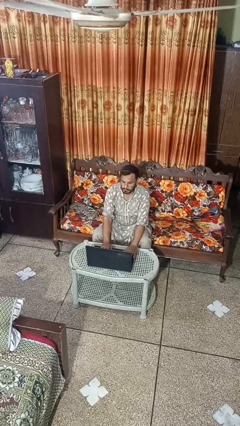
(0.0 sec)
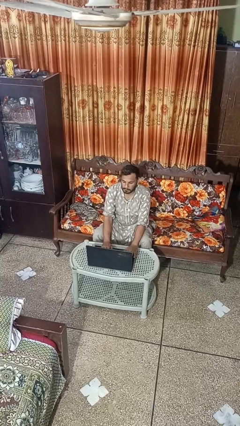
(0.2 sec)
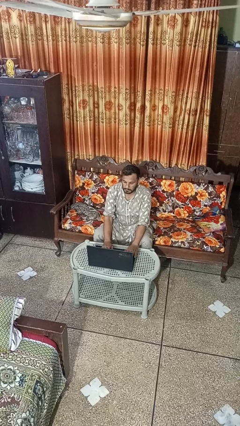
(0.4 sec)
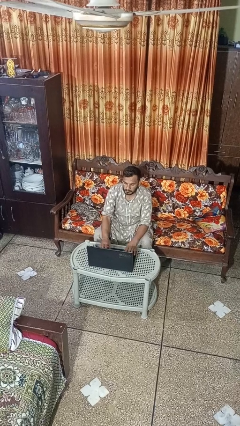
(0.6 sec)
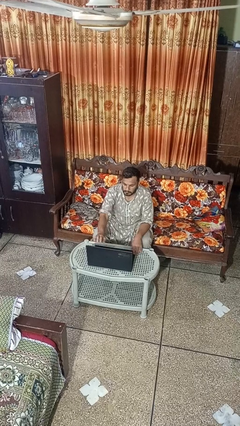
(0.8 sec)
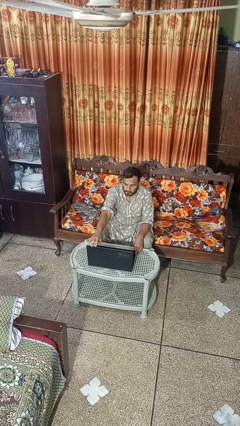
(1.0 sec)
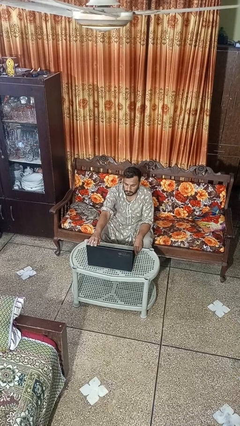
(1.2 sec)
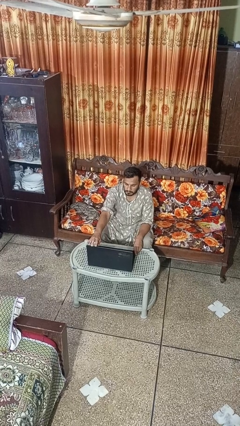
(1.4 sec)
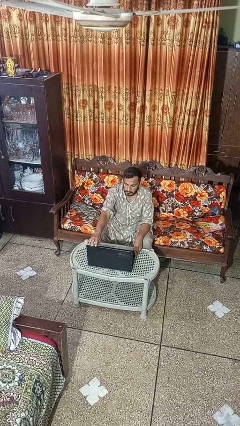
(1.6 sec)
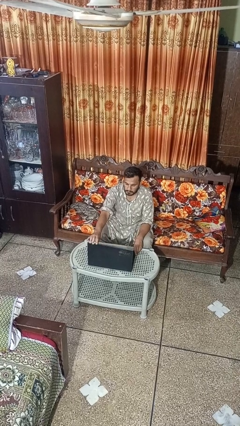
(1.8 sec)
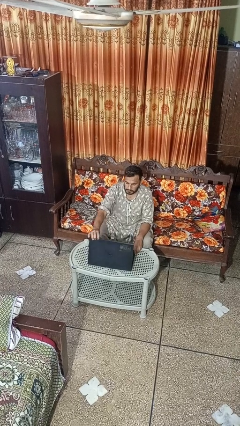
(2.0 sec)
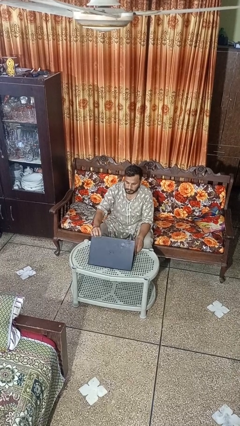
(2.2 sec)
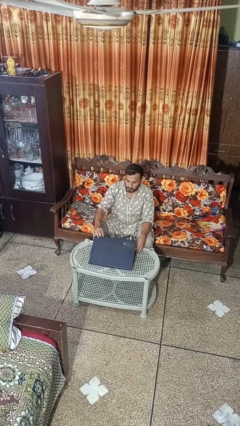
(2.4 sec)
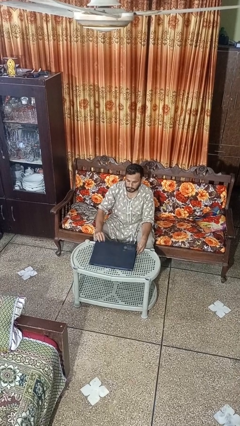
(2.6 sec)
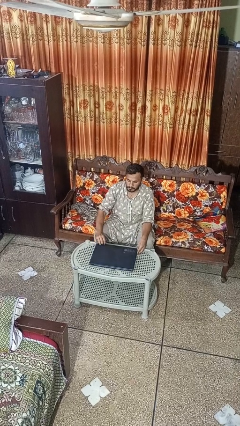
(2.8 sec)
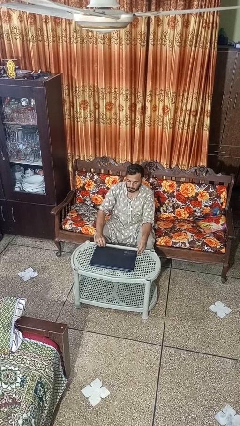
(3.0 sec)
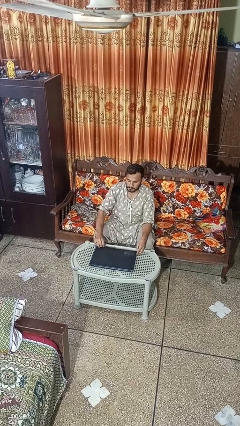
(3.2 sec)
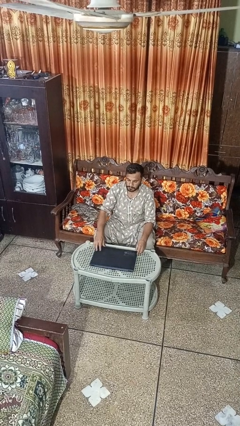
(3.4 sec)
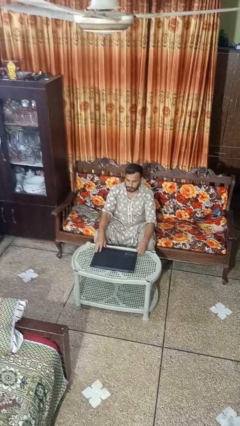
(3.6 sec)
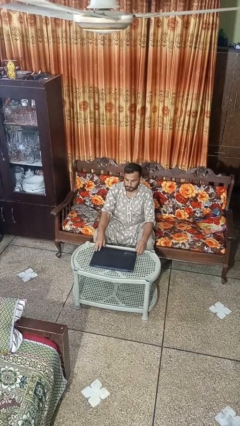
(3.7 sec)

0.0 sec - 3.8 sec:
person closes laptop

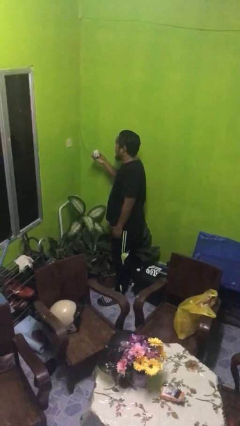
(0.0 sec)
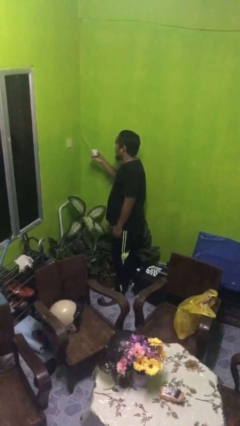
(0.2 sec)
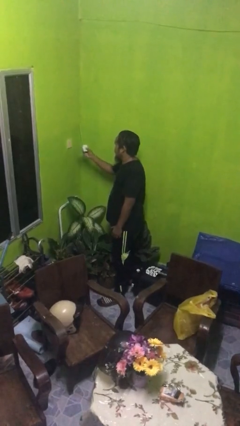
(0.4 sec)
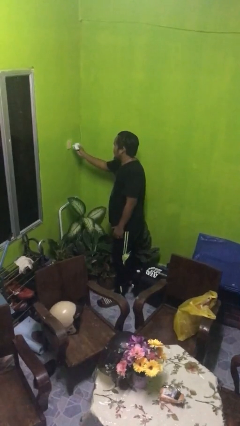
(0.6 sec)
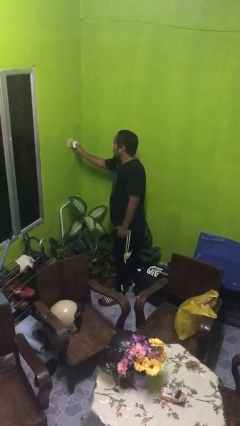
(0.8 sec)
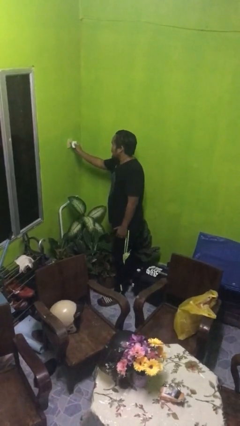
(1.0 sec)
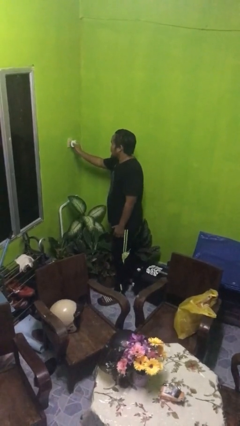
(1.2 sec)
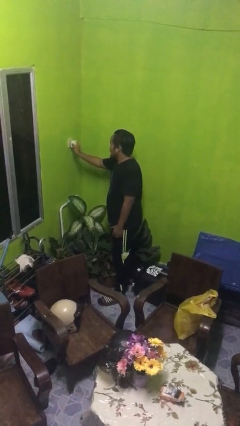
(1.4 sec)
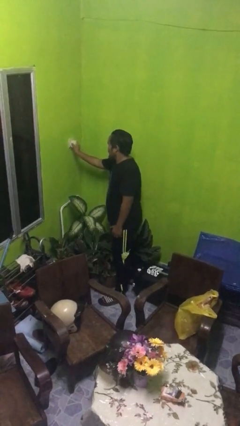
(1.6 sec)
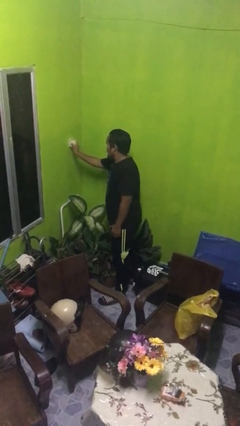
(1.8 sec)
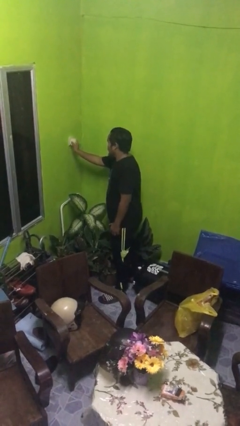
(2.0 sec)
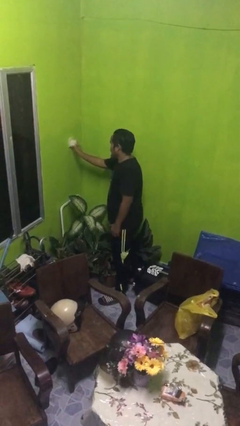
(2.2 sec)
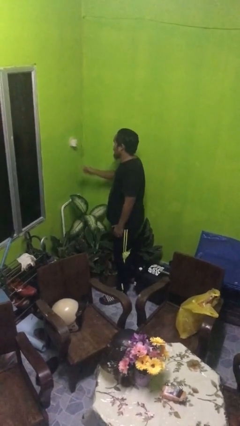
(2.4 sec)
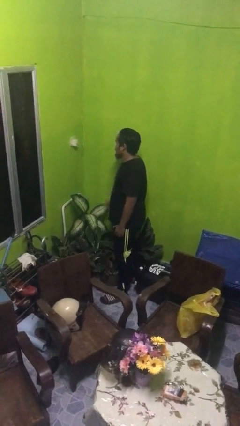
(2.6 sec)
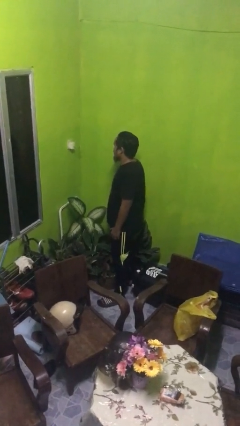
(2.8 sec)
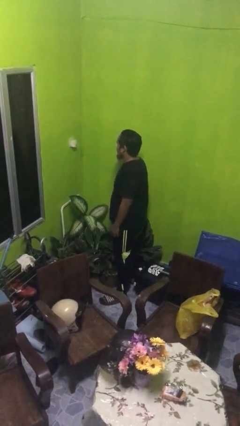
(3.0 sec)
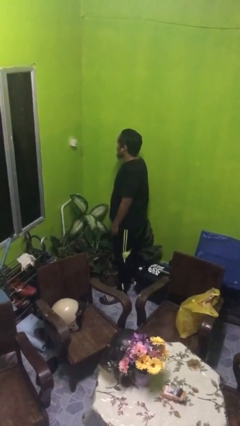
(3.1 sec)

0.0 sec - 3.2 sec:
person plugs into electrical socket

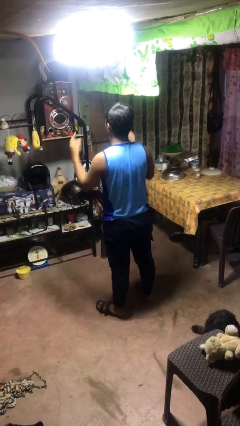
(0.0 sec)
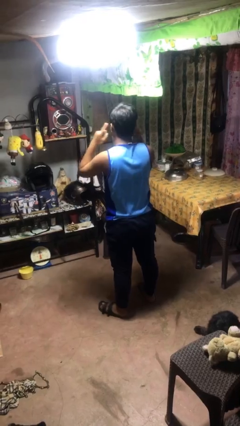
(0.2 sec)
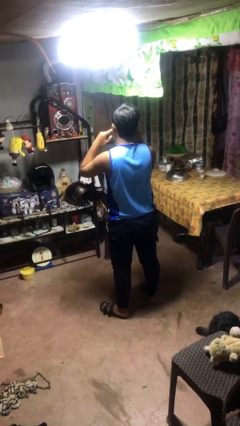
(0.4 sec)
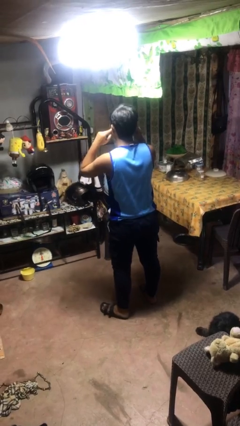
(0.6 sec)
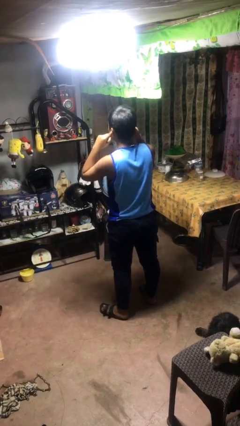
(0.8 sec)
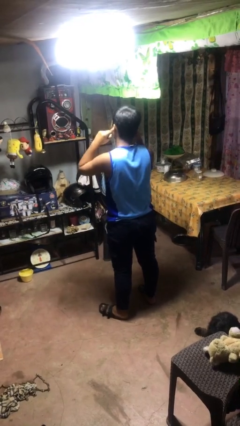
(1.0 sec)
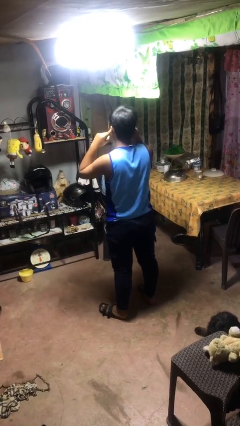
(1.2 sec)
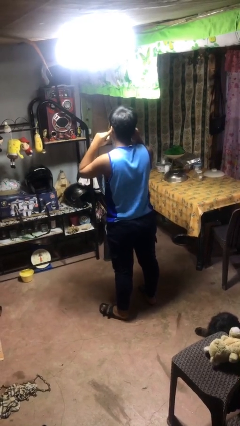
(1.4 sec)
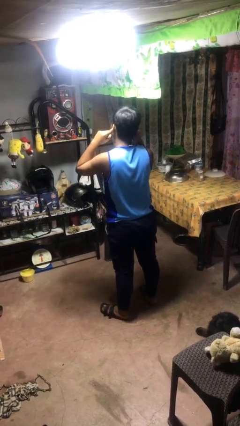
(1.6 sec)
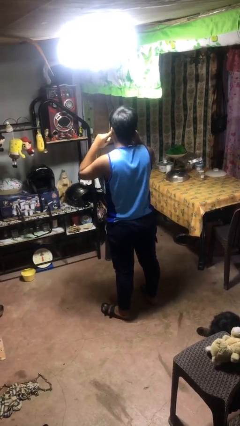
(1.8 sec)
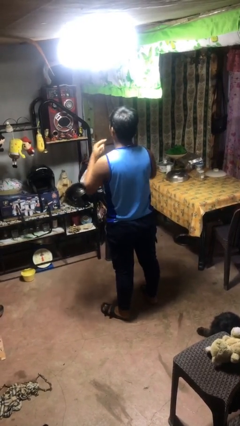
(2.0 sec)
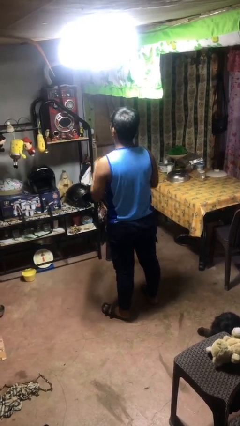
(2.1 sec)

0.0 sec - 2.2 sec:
person puts fingers in ear

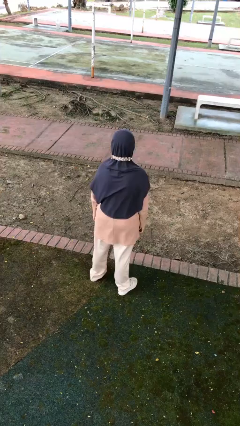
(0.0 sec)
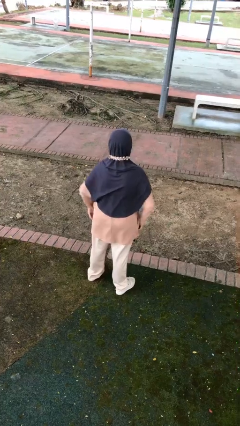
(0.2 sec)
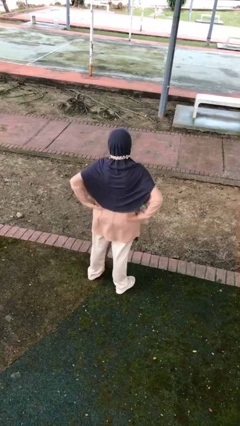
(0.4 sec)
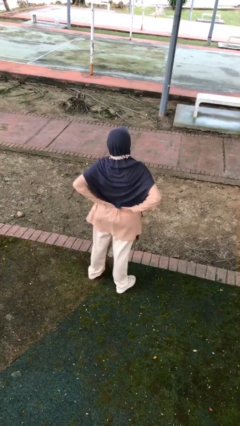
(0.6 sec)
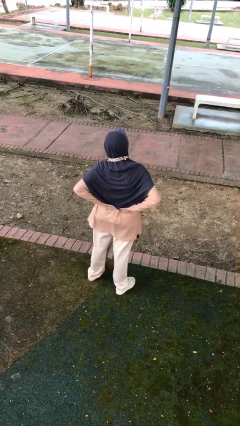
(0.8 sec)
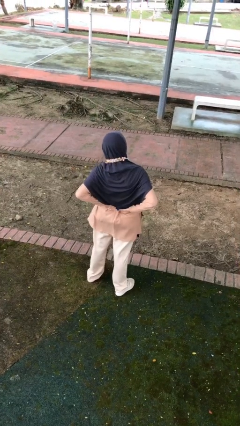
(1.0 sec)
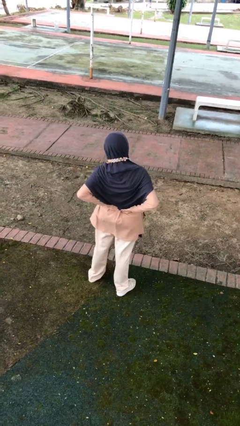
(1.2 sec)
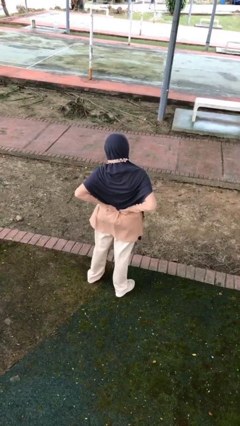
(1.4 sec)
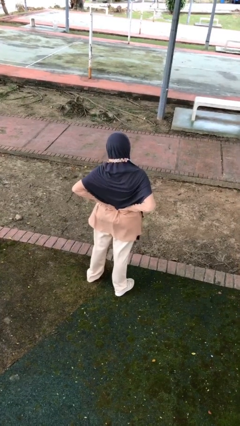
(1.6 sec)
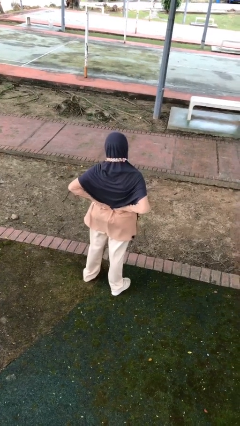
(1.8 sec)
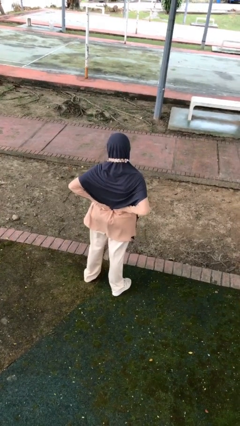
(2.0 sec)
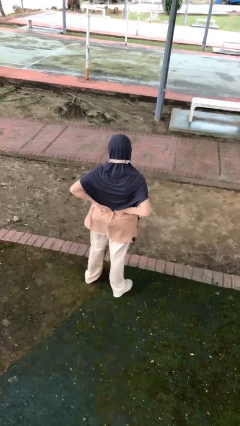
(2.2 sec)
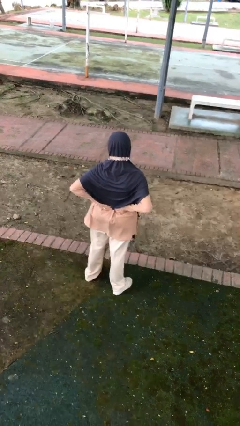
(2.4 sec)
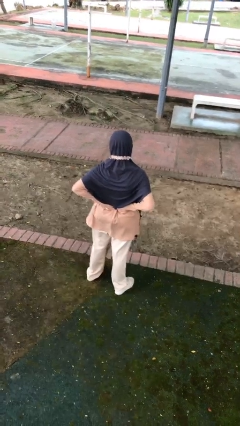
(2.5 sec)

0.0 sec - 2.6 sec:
person stretches back

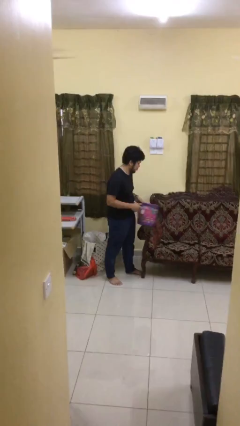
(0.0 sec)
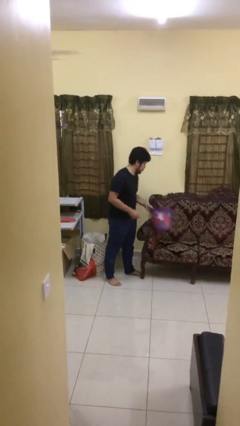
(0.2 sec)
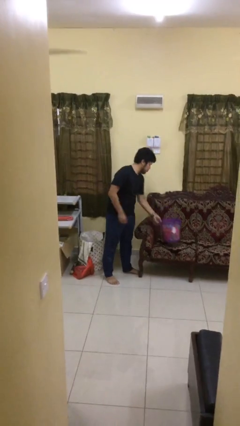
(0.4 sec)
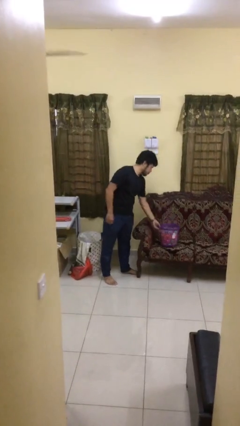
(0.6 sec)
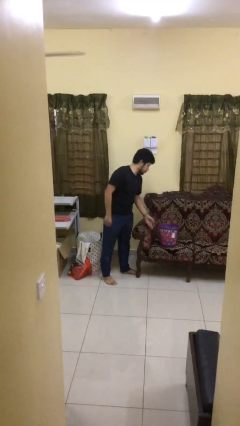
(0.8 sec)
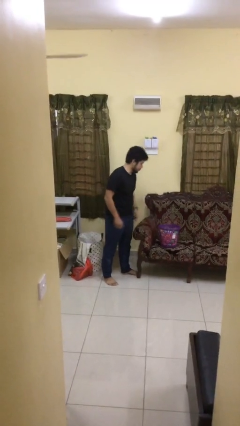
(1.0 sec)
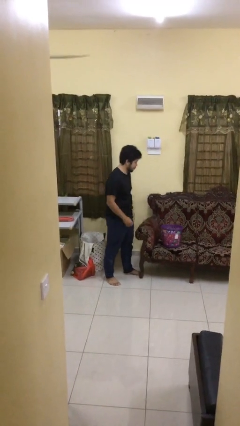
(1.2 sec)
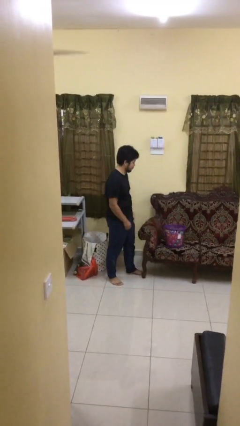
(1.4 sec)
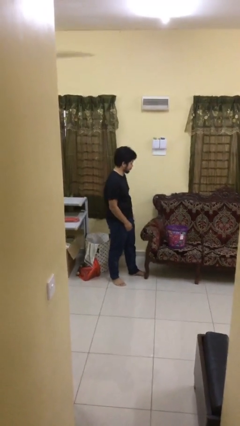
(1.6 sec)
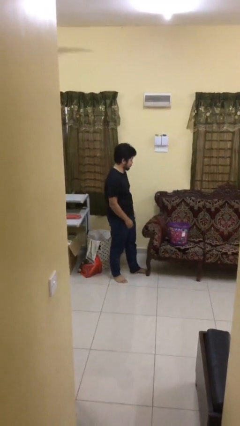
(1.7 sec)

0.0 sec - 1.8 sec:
person puts down object on couch

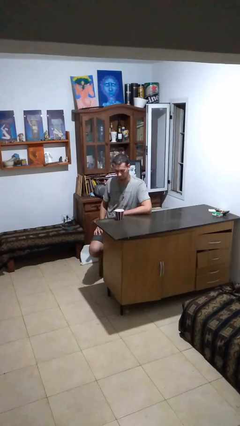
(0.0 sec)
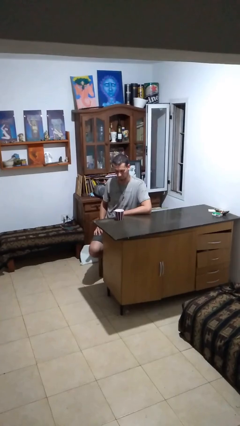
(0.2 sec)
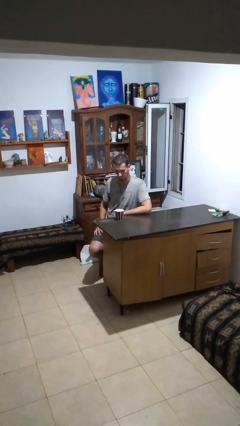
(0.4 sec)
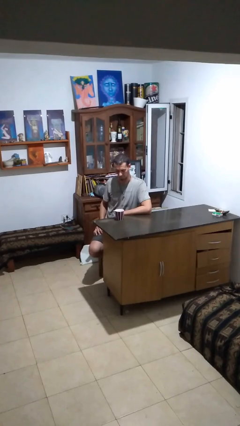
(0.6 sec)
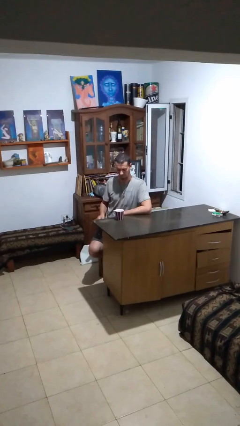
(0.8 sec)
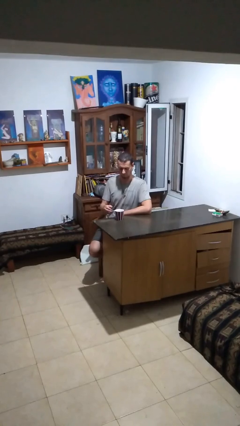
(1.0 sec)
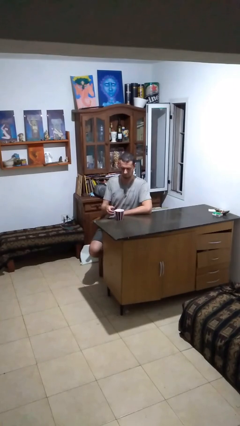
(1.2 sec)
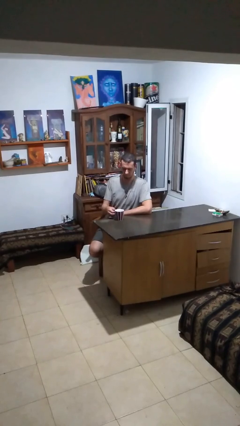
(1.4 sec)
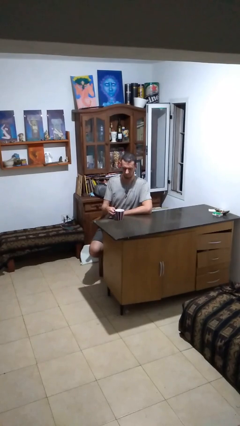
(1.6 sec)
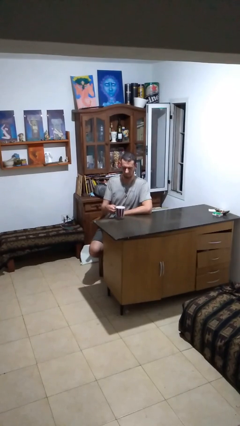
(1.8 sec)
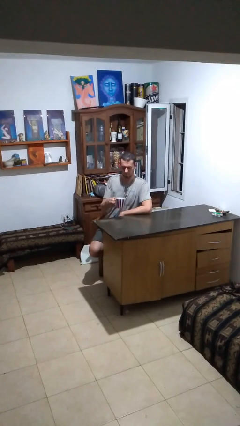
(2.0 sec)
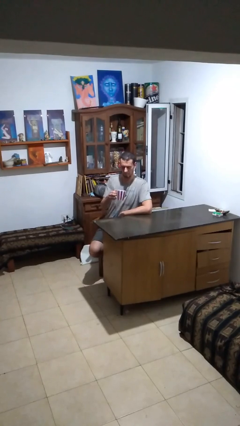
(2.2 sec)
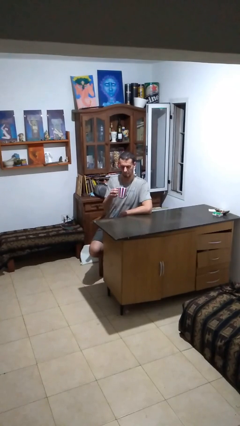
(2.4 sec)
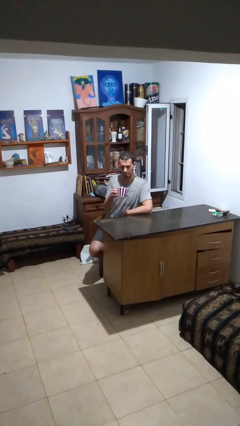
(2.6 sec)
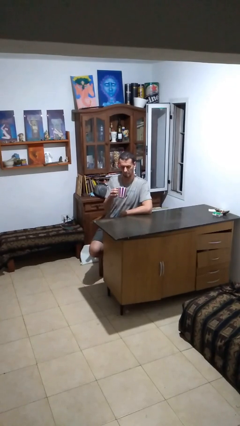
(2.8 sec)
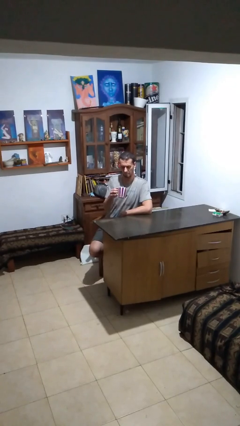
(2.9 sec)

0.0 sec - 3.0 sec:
person picks up object from table

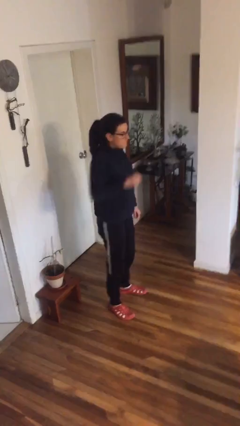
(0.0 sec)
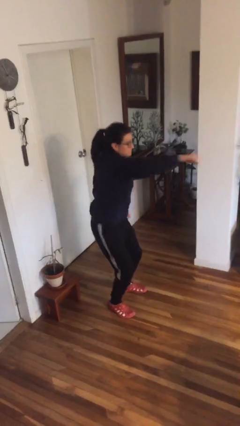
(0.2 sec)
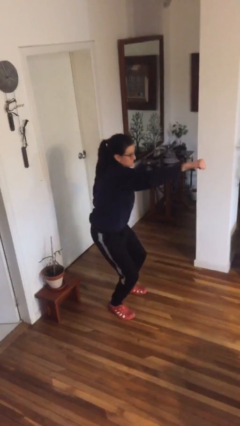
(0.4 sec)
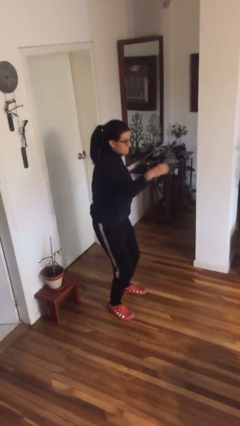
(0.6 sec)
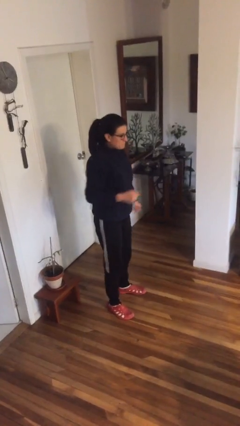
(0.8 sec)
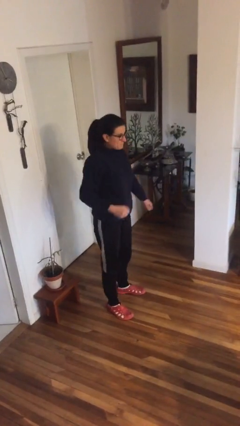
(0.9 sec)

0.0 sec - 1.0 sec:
person punches
